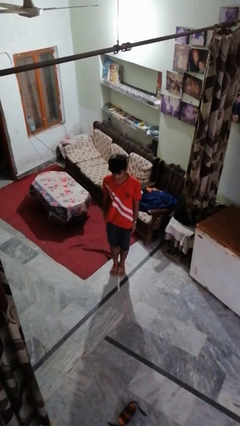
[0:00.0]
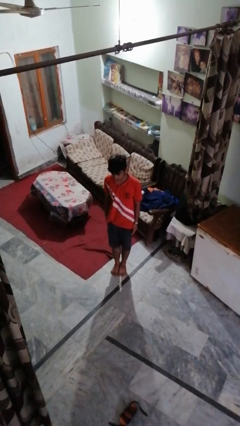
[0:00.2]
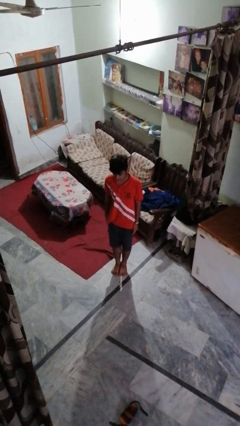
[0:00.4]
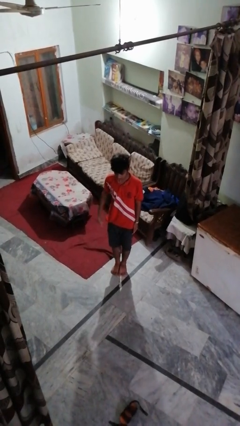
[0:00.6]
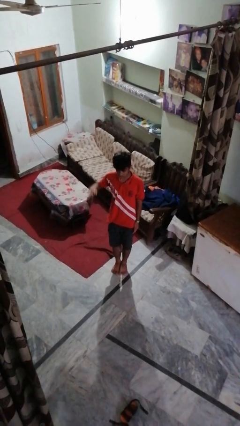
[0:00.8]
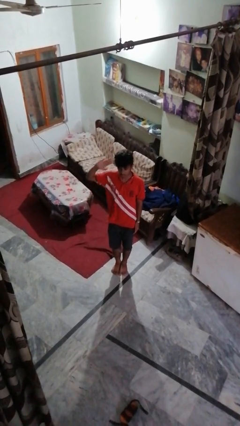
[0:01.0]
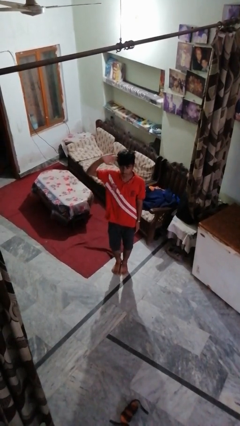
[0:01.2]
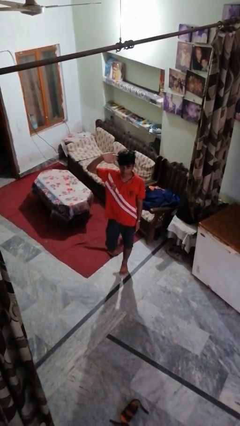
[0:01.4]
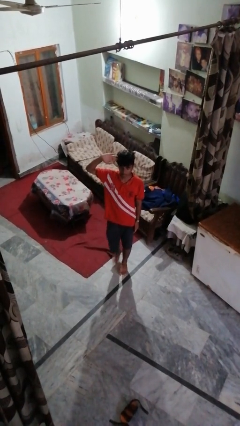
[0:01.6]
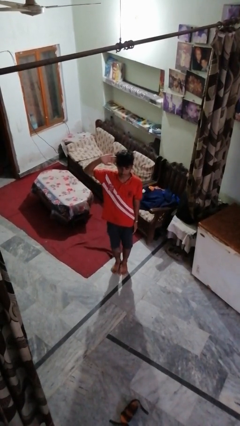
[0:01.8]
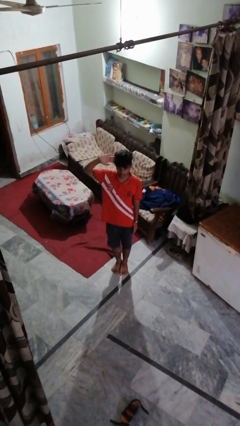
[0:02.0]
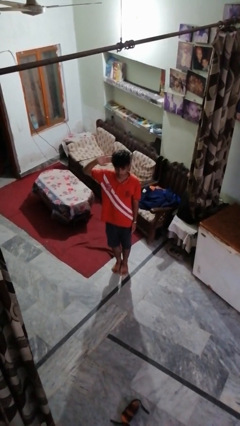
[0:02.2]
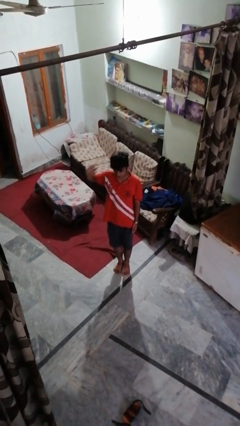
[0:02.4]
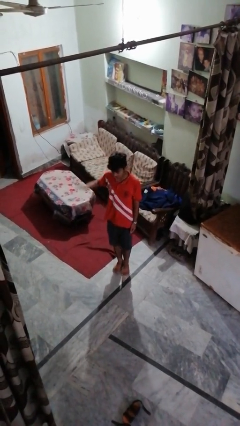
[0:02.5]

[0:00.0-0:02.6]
person salutes

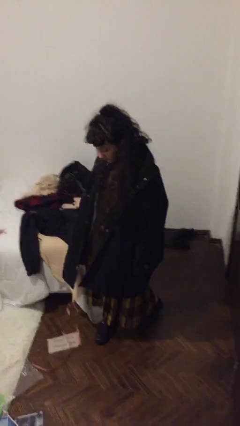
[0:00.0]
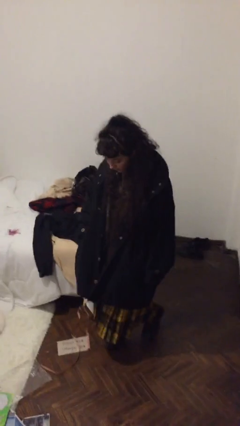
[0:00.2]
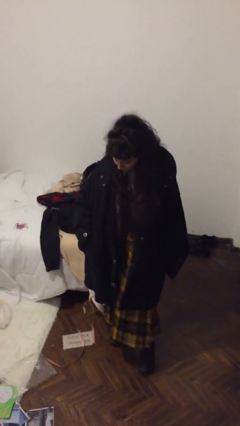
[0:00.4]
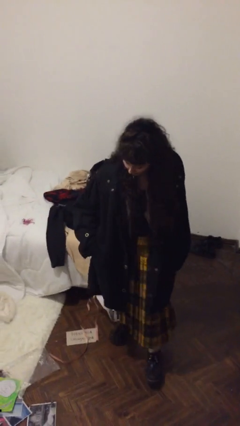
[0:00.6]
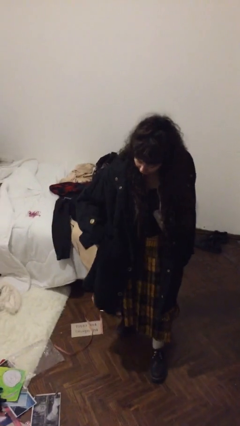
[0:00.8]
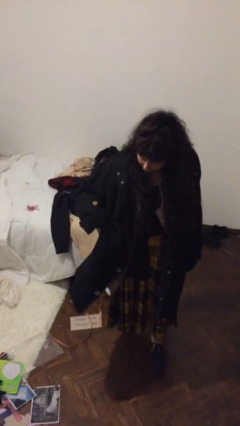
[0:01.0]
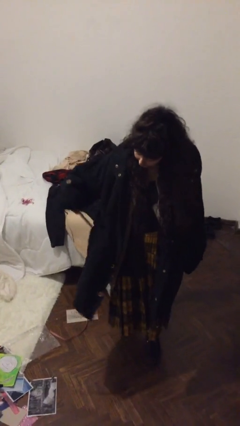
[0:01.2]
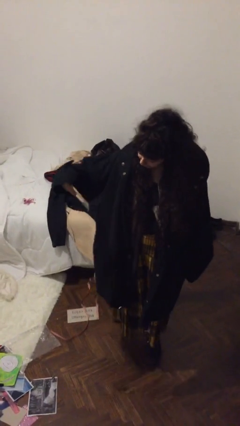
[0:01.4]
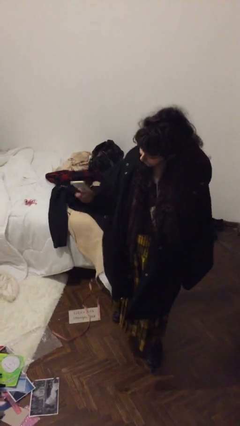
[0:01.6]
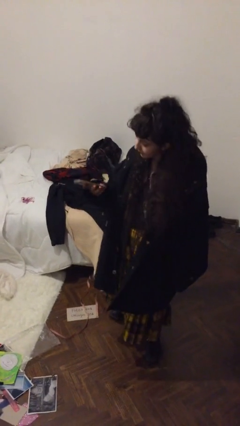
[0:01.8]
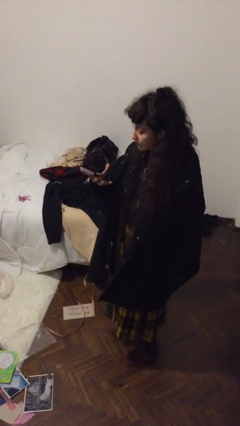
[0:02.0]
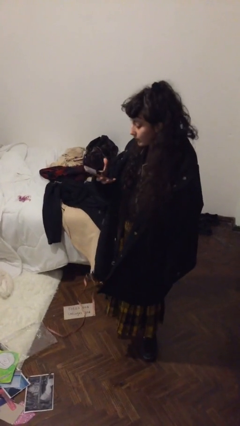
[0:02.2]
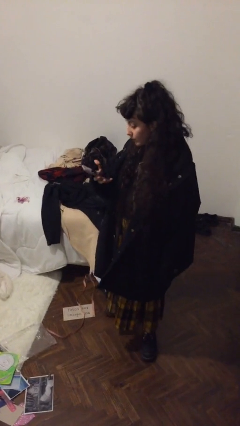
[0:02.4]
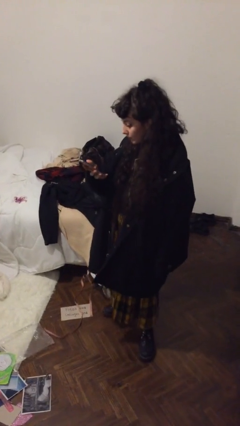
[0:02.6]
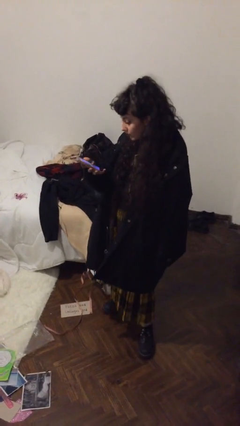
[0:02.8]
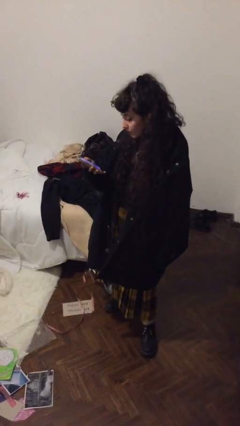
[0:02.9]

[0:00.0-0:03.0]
person takes phone from pocket

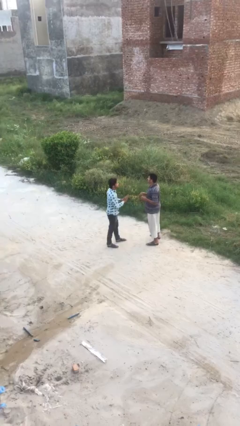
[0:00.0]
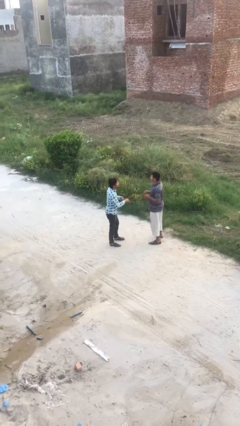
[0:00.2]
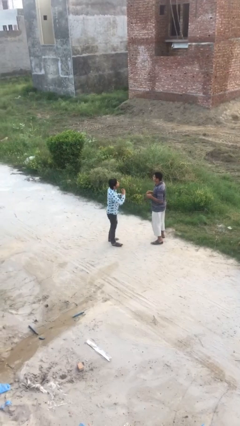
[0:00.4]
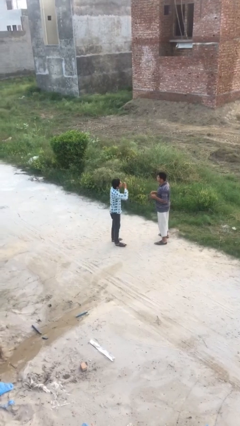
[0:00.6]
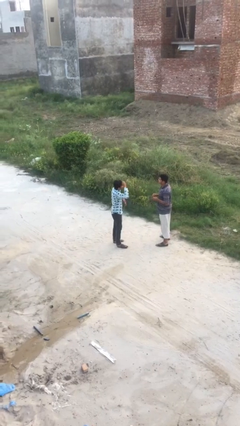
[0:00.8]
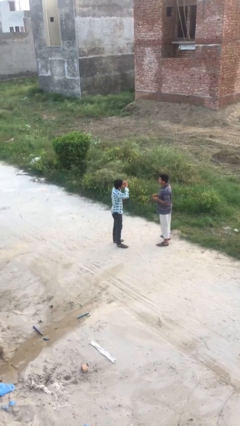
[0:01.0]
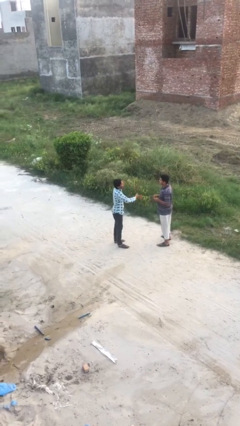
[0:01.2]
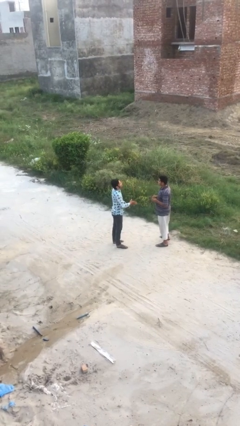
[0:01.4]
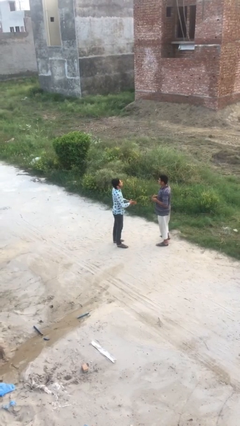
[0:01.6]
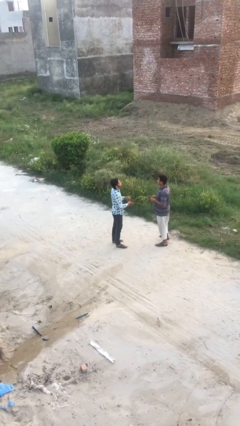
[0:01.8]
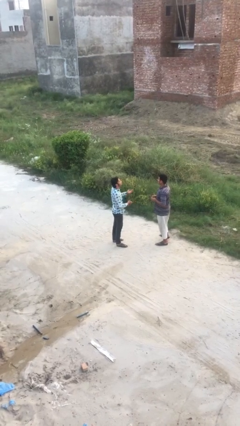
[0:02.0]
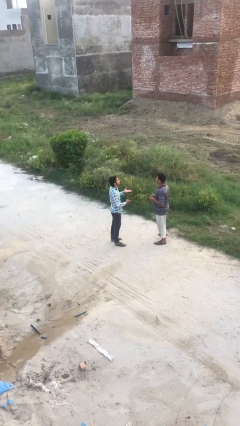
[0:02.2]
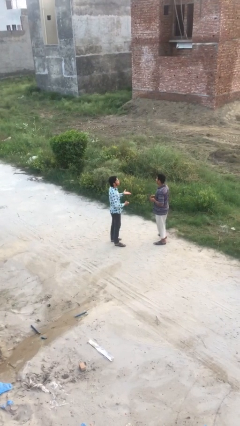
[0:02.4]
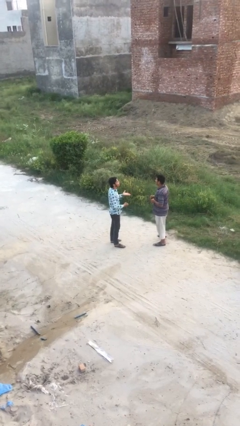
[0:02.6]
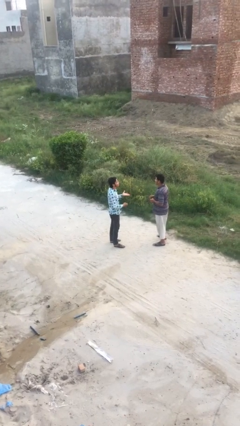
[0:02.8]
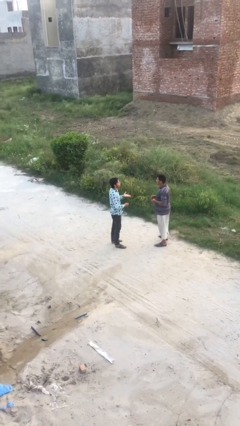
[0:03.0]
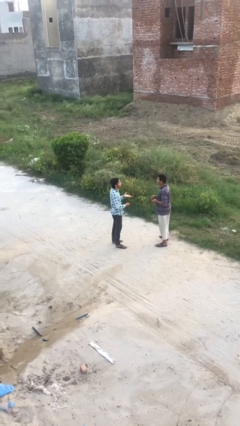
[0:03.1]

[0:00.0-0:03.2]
person talks to person

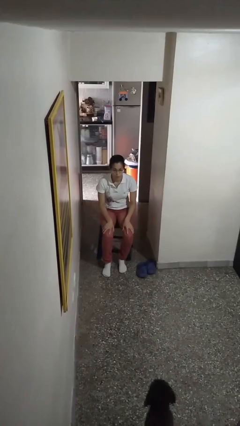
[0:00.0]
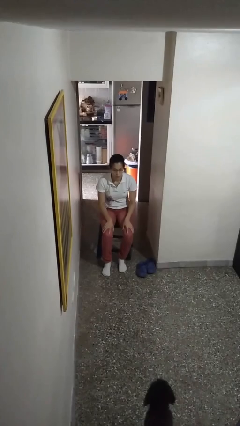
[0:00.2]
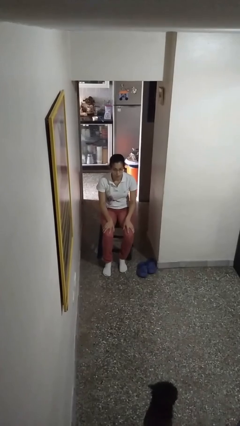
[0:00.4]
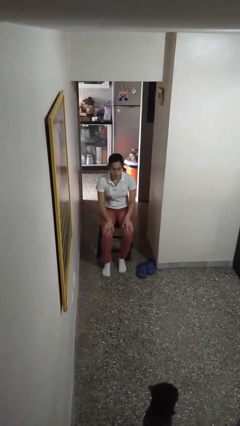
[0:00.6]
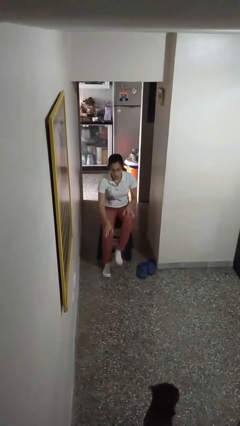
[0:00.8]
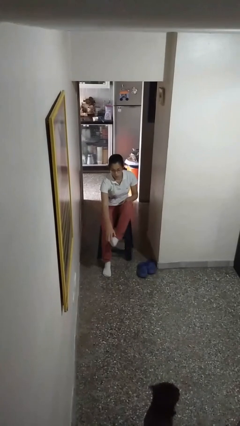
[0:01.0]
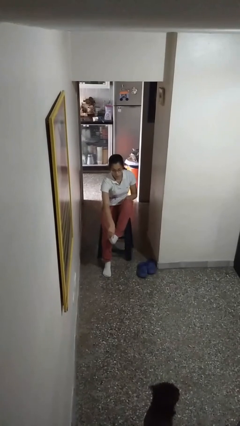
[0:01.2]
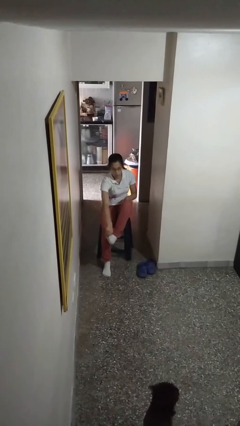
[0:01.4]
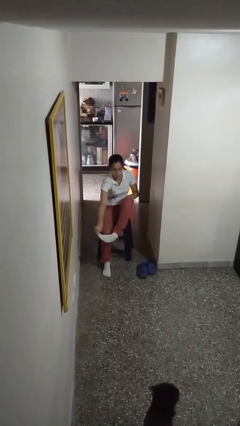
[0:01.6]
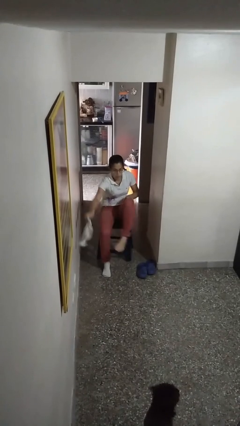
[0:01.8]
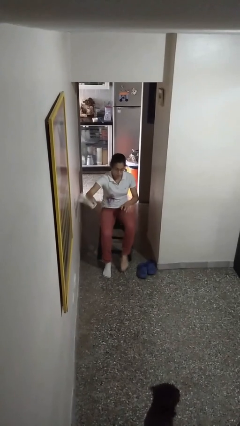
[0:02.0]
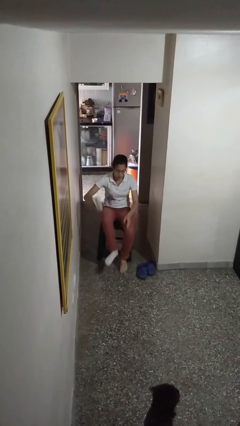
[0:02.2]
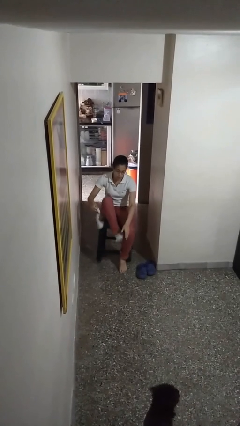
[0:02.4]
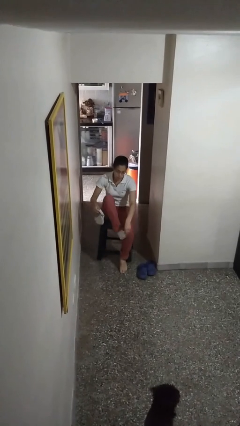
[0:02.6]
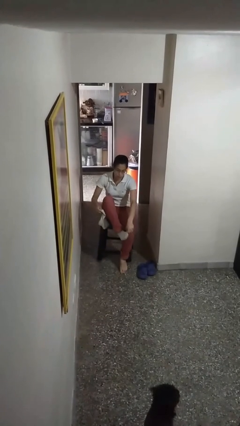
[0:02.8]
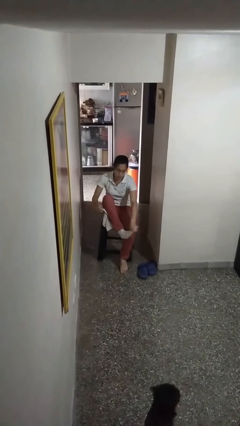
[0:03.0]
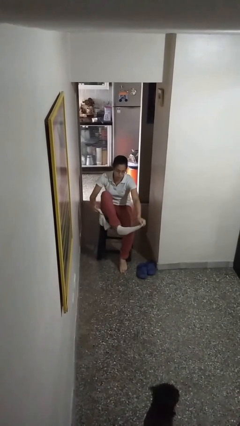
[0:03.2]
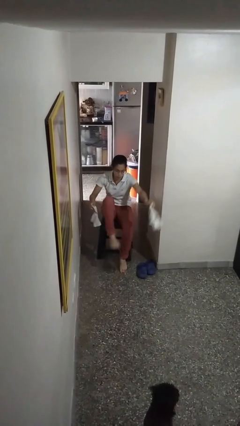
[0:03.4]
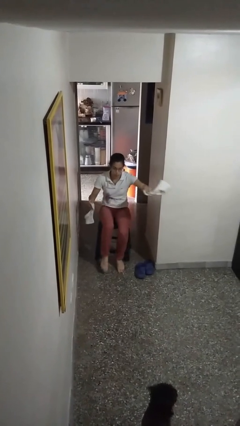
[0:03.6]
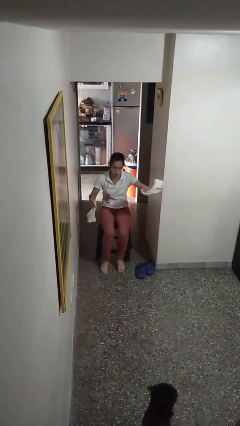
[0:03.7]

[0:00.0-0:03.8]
person takes off socks

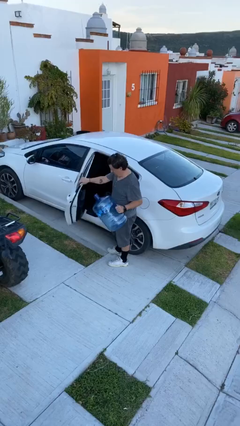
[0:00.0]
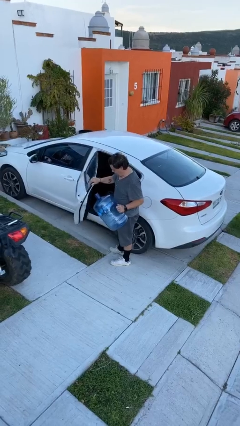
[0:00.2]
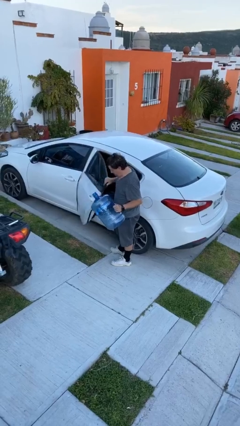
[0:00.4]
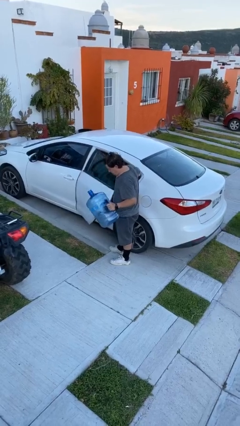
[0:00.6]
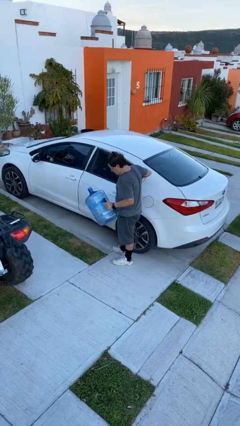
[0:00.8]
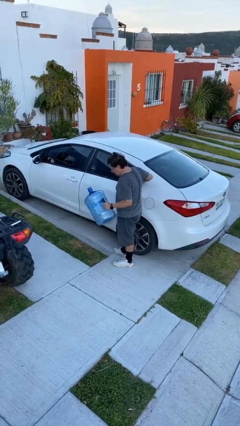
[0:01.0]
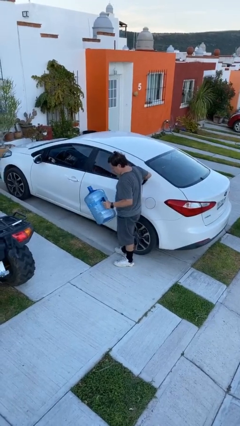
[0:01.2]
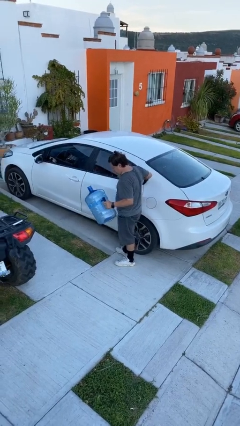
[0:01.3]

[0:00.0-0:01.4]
person closes car door

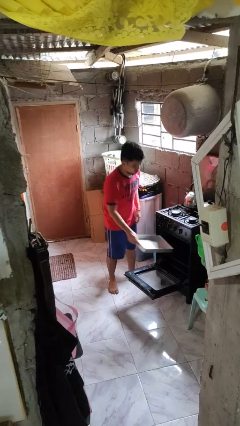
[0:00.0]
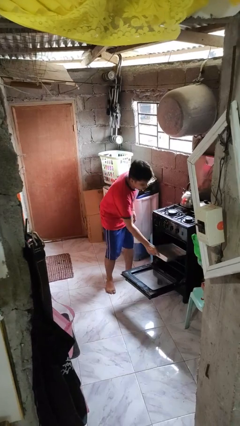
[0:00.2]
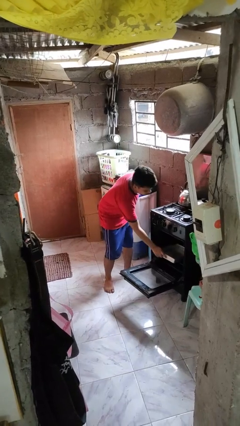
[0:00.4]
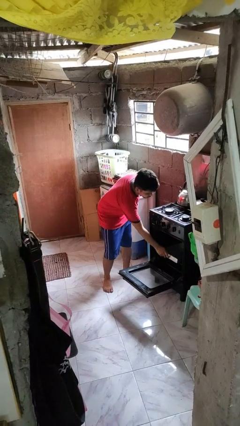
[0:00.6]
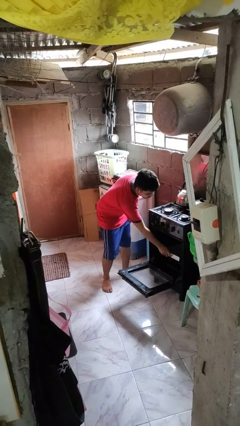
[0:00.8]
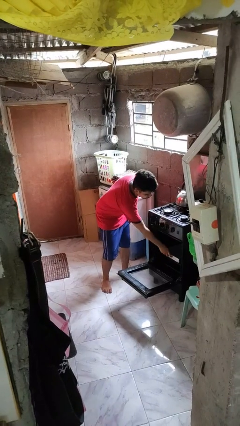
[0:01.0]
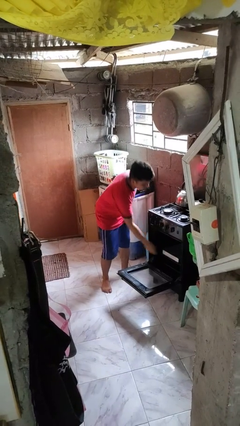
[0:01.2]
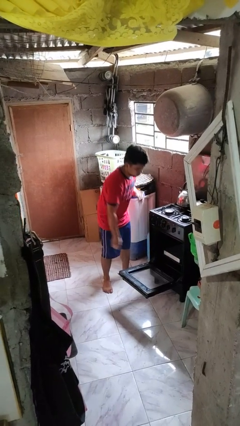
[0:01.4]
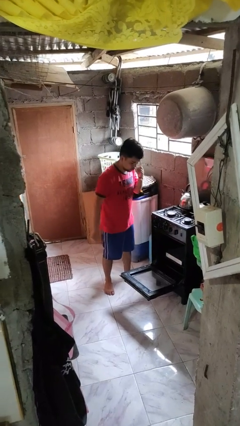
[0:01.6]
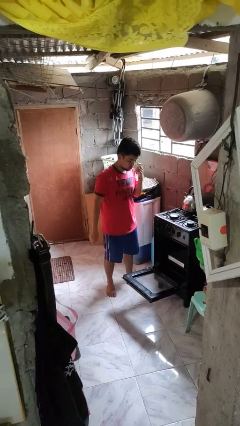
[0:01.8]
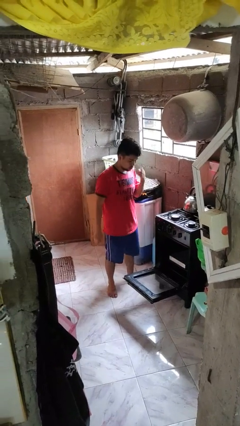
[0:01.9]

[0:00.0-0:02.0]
person puts object into oven

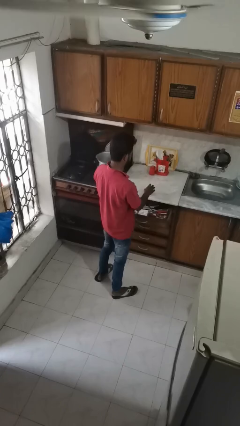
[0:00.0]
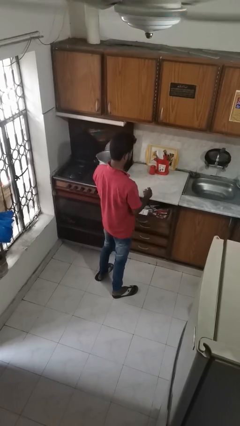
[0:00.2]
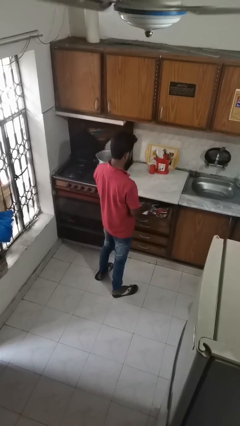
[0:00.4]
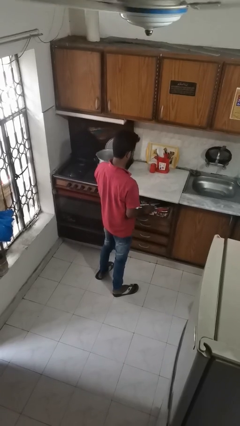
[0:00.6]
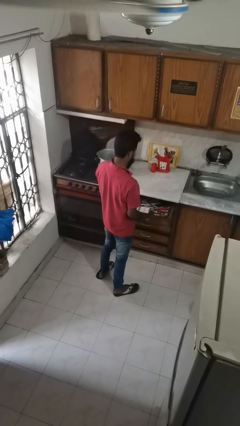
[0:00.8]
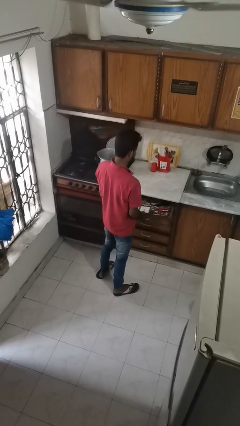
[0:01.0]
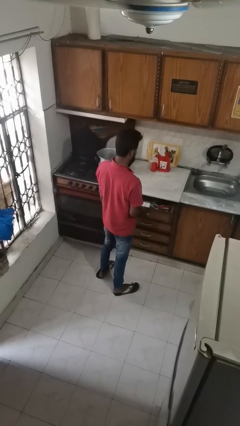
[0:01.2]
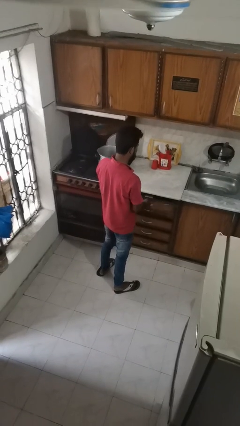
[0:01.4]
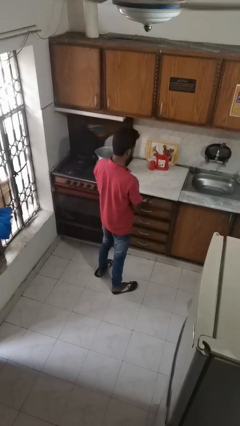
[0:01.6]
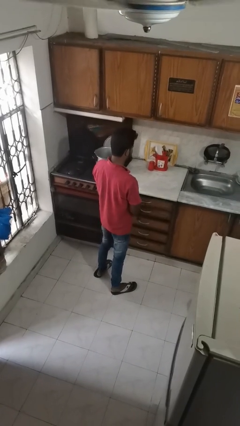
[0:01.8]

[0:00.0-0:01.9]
person puts object into kitchen drawer
